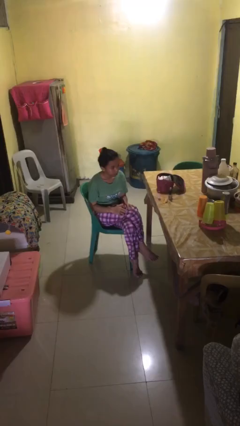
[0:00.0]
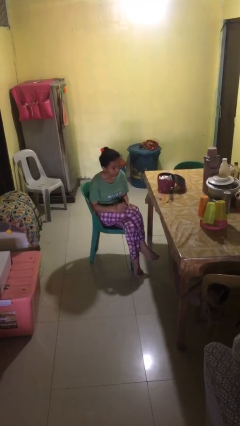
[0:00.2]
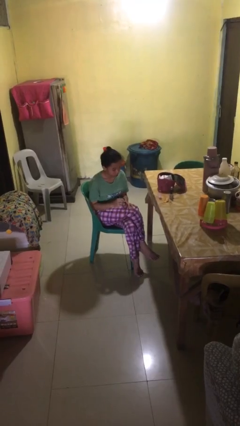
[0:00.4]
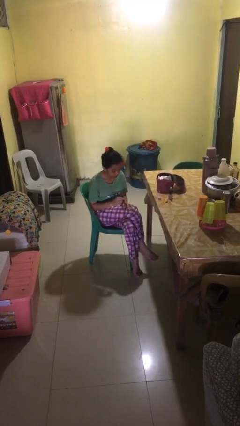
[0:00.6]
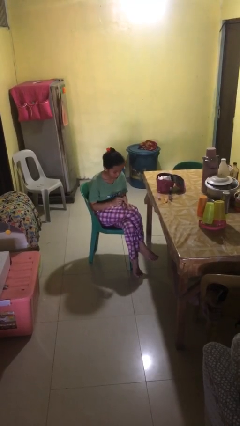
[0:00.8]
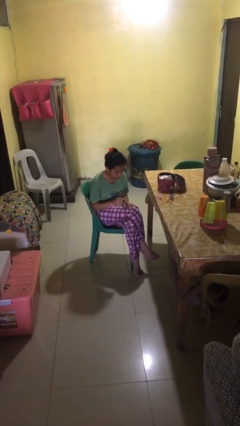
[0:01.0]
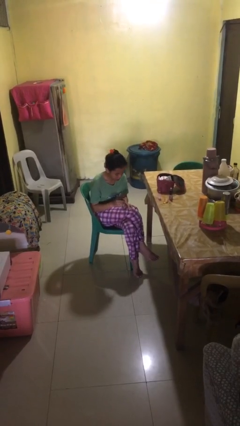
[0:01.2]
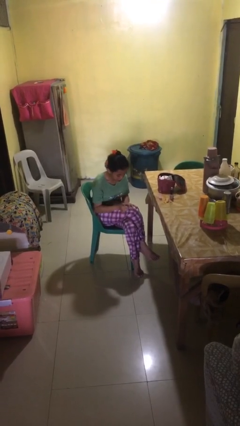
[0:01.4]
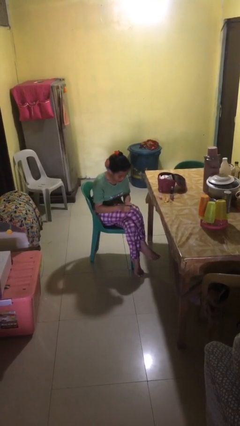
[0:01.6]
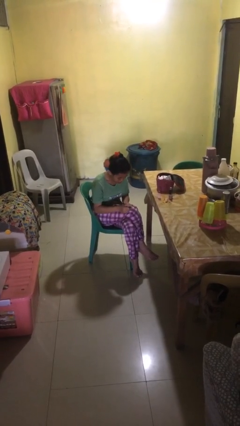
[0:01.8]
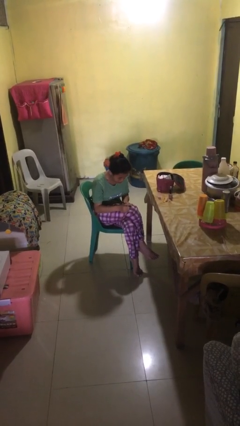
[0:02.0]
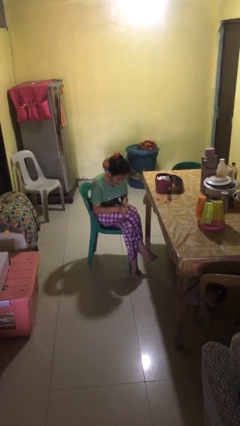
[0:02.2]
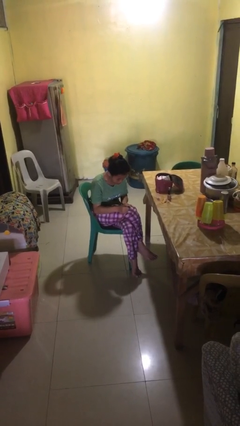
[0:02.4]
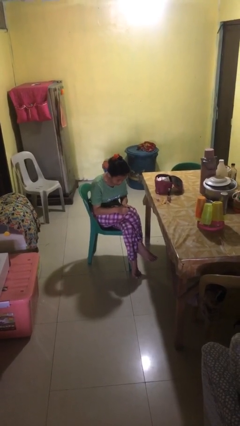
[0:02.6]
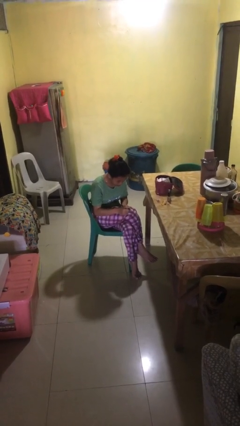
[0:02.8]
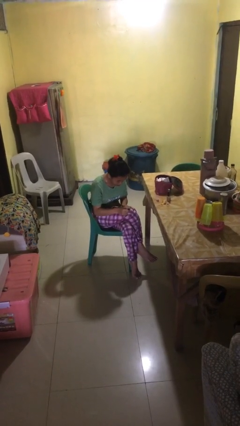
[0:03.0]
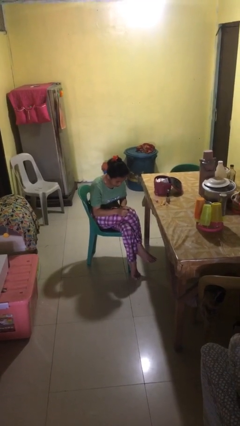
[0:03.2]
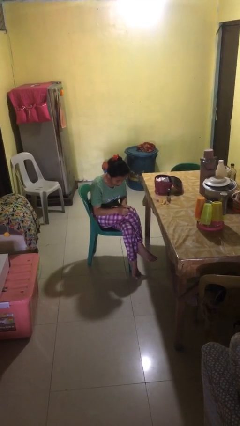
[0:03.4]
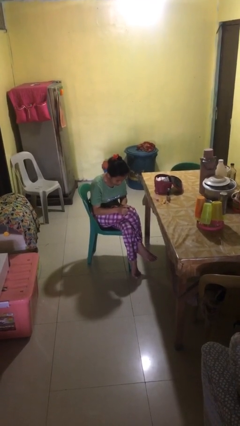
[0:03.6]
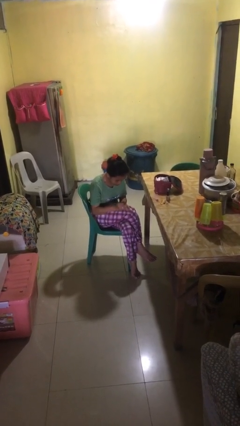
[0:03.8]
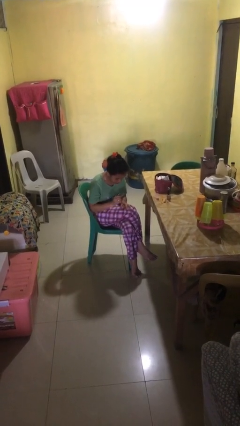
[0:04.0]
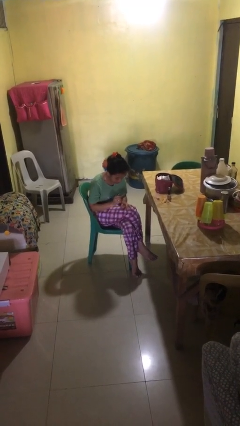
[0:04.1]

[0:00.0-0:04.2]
person paints fingernails

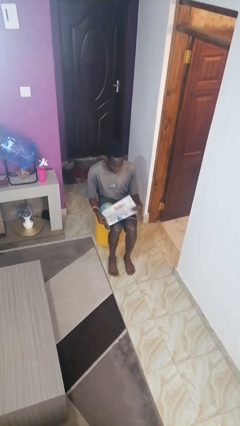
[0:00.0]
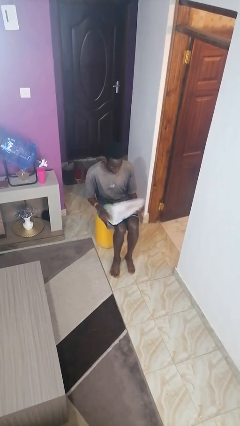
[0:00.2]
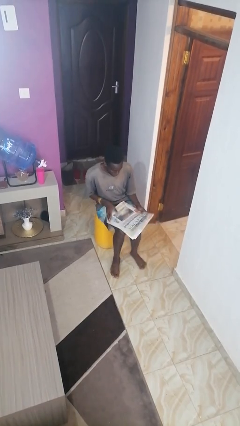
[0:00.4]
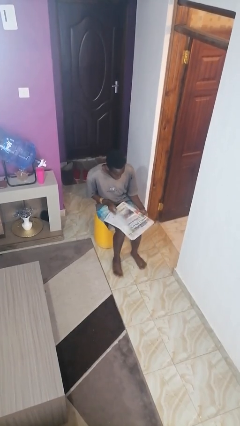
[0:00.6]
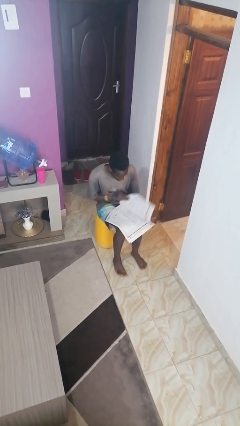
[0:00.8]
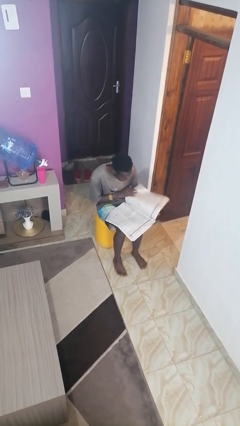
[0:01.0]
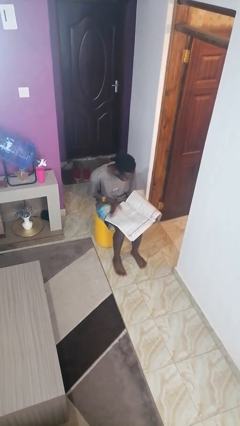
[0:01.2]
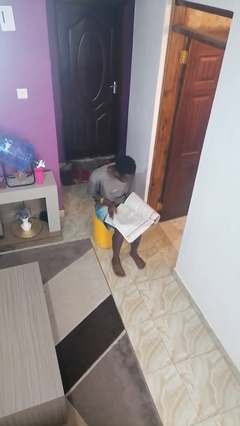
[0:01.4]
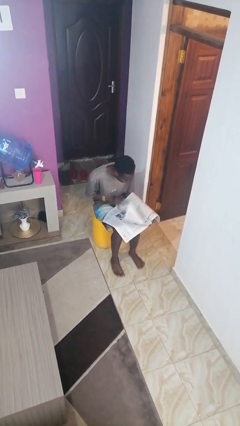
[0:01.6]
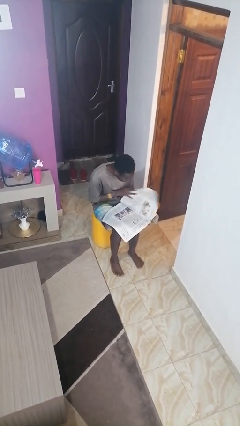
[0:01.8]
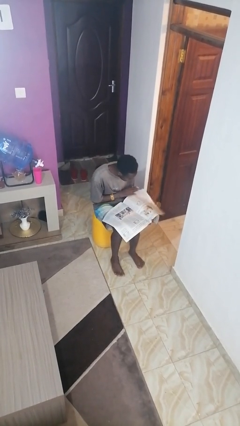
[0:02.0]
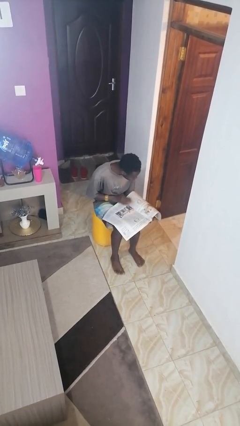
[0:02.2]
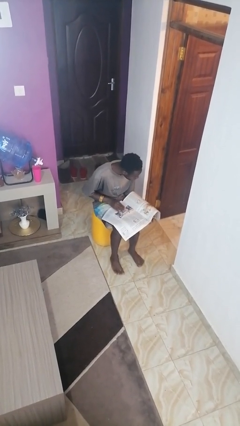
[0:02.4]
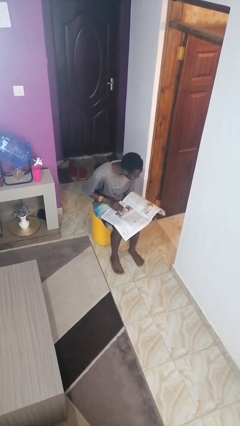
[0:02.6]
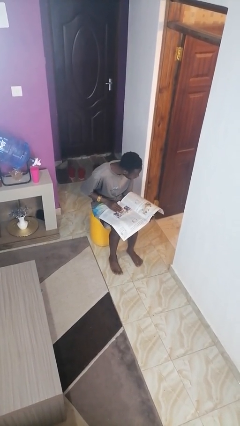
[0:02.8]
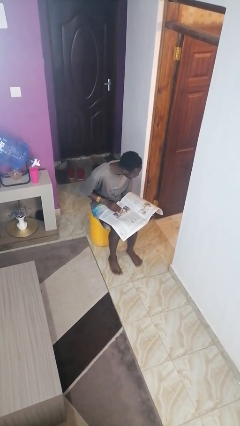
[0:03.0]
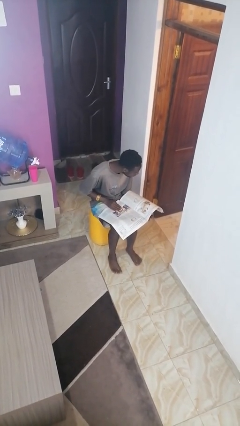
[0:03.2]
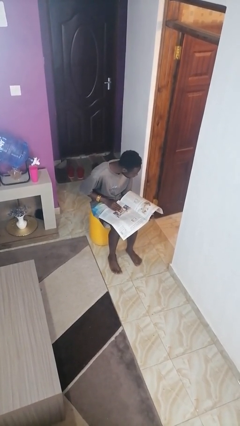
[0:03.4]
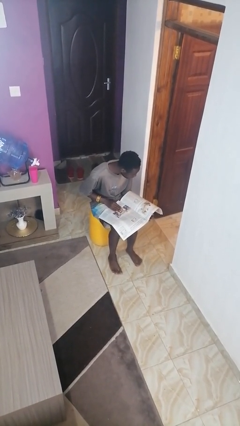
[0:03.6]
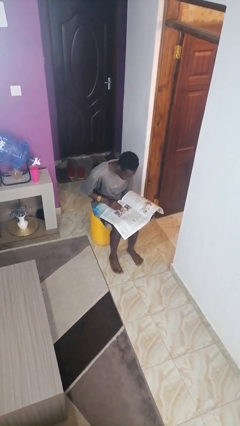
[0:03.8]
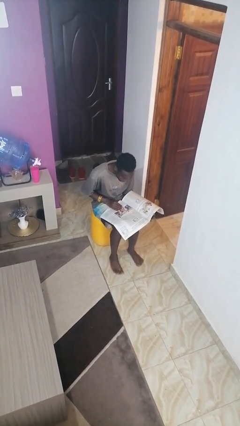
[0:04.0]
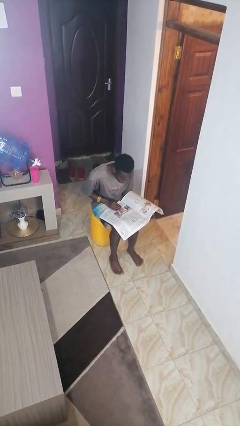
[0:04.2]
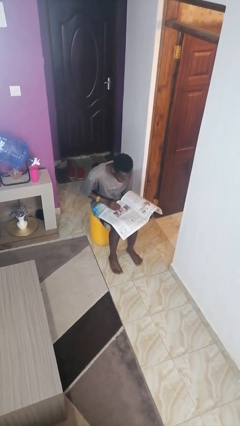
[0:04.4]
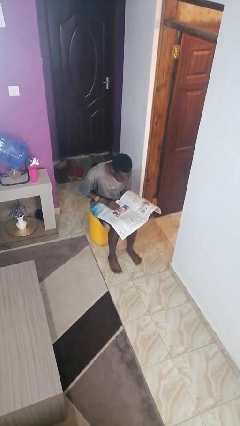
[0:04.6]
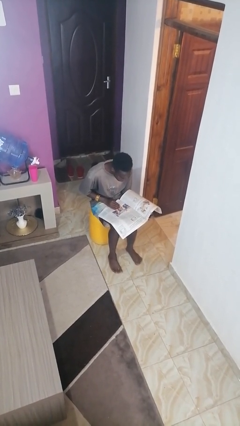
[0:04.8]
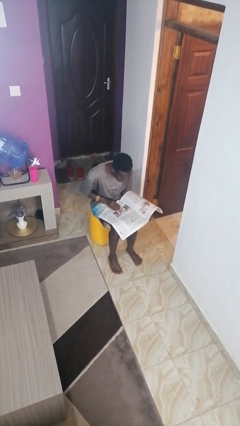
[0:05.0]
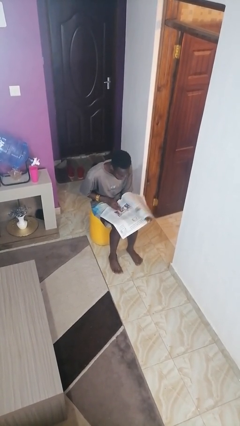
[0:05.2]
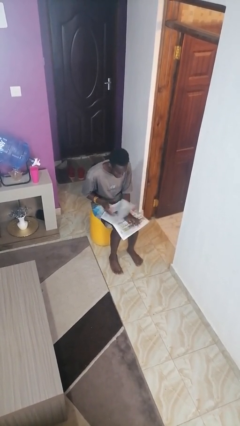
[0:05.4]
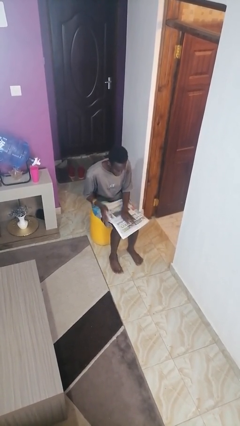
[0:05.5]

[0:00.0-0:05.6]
person reads newspaper

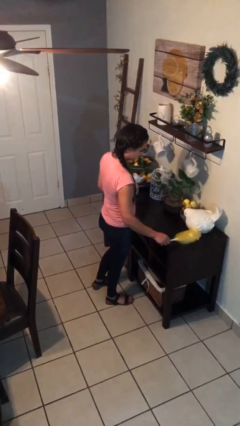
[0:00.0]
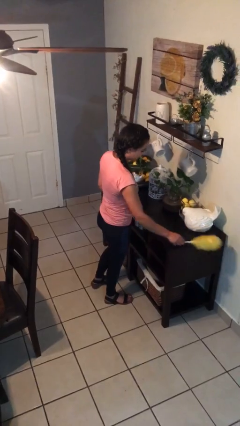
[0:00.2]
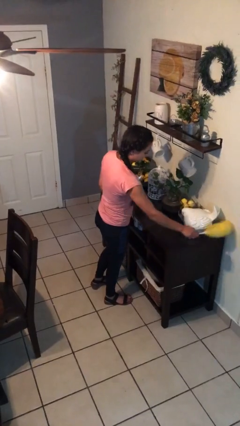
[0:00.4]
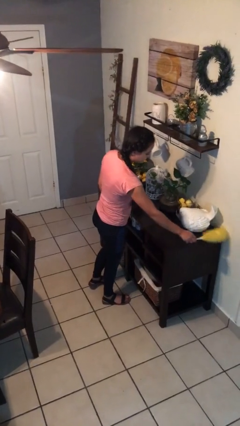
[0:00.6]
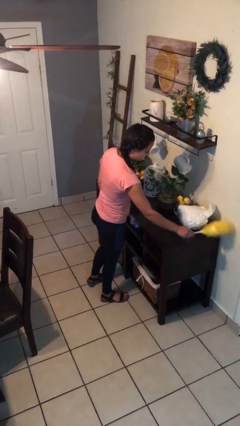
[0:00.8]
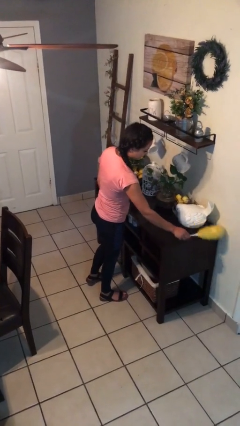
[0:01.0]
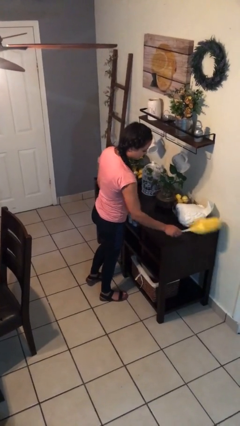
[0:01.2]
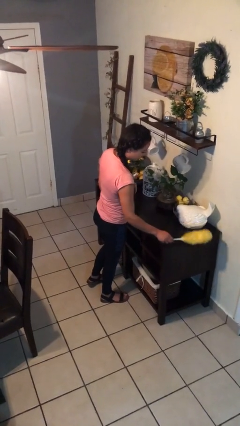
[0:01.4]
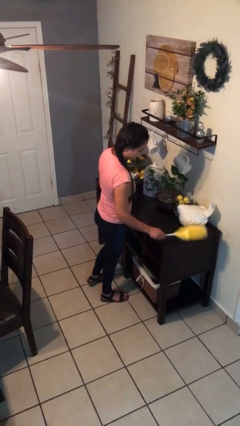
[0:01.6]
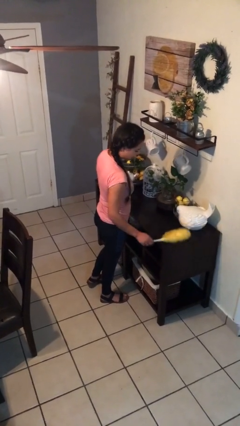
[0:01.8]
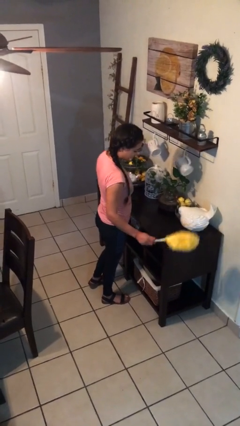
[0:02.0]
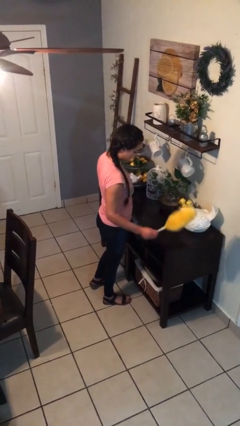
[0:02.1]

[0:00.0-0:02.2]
person dusts furniture

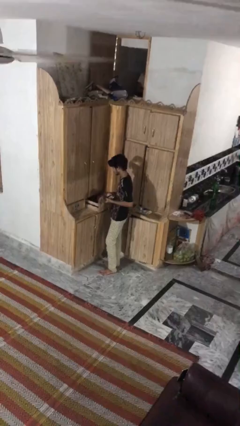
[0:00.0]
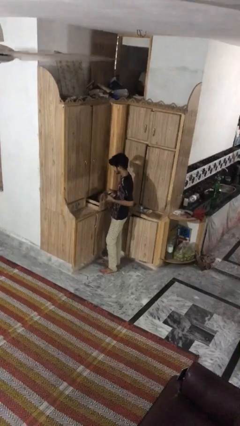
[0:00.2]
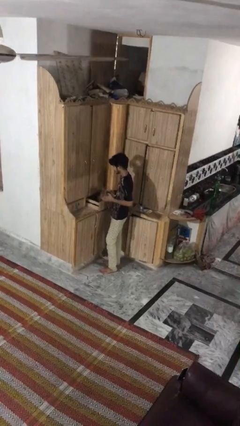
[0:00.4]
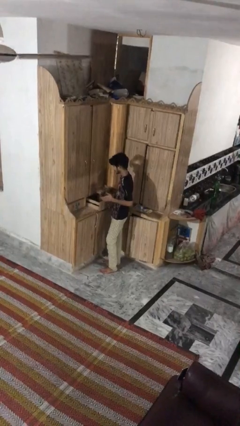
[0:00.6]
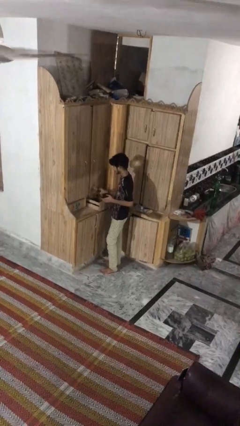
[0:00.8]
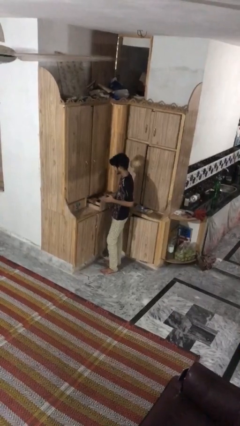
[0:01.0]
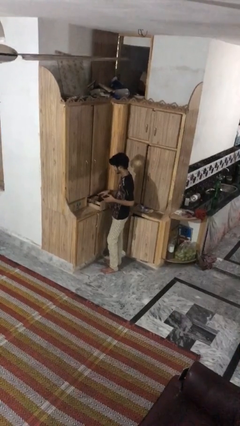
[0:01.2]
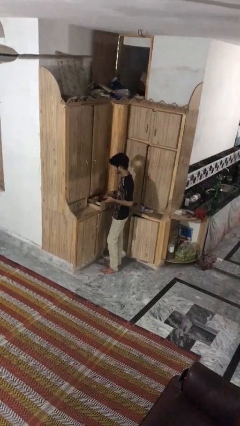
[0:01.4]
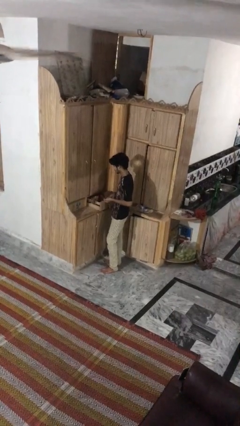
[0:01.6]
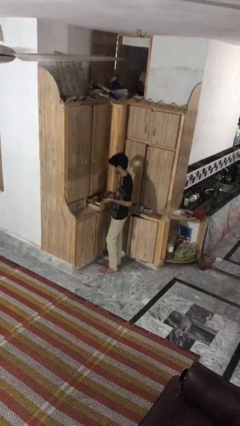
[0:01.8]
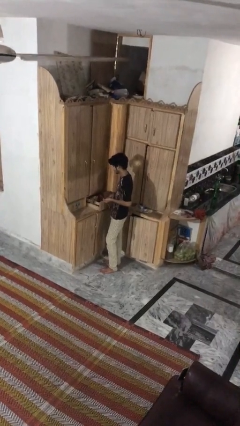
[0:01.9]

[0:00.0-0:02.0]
person puts clothes into dresser

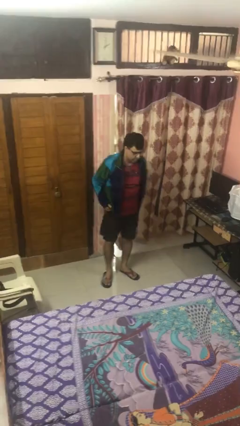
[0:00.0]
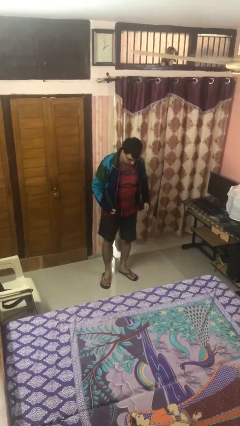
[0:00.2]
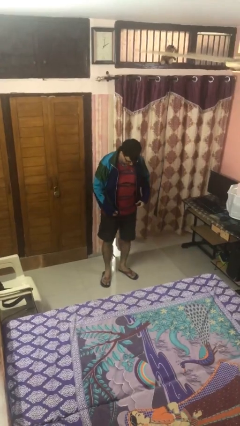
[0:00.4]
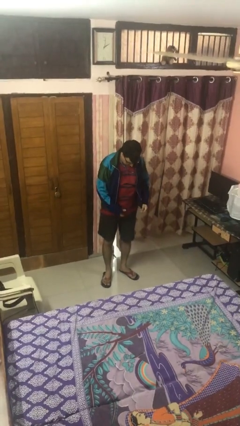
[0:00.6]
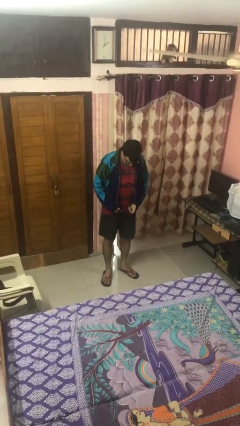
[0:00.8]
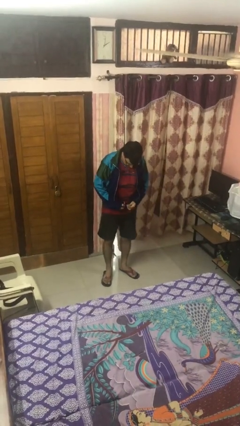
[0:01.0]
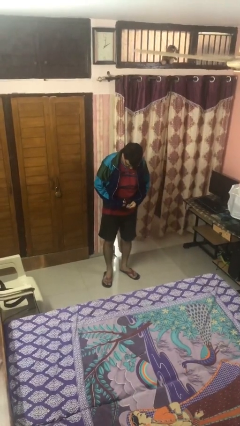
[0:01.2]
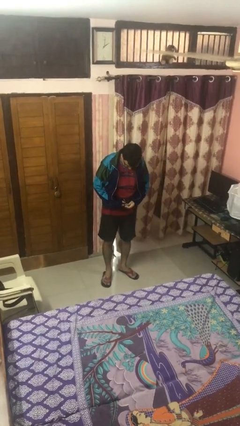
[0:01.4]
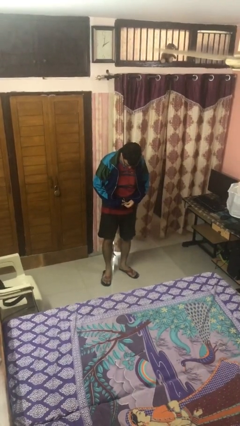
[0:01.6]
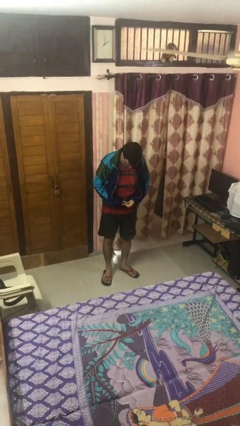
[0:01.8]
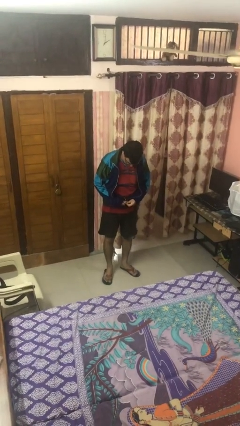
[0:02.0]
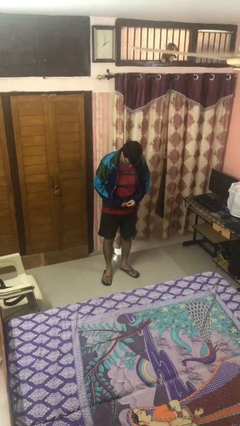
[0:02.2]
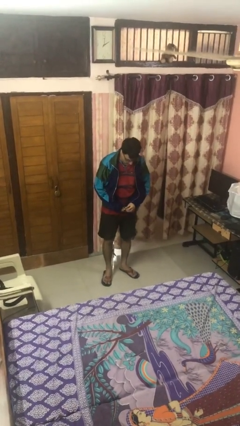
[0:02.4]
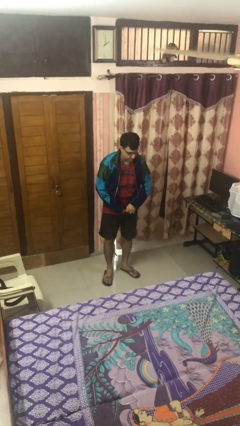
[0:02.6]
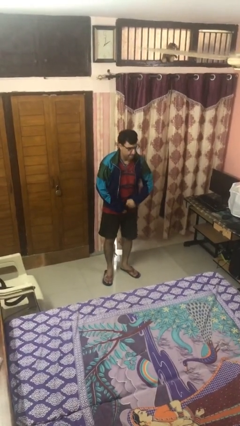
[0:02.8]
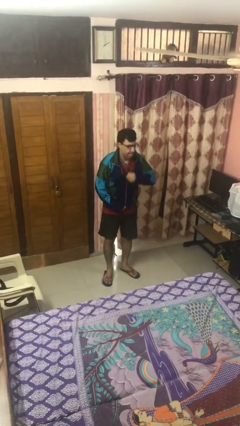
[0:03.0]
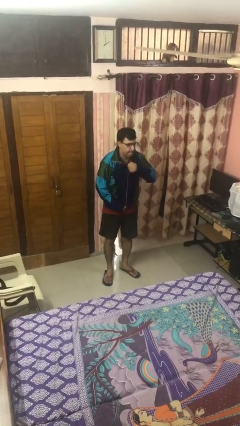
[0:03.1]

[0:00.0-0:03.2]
person zips up jacket
